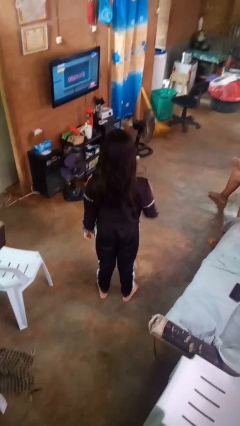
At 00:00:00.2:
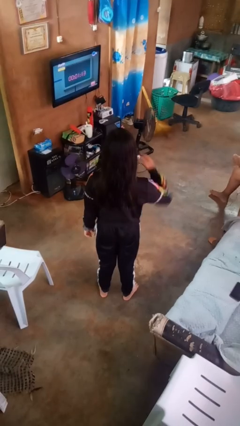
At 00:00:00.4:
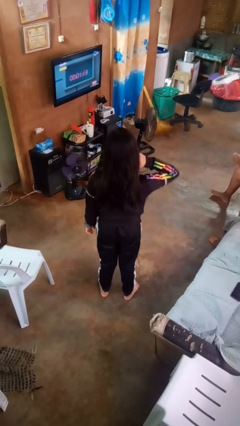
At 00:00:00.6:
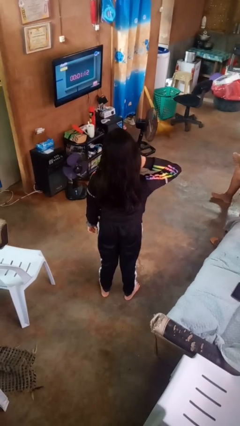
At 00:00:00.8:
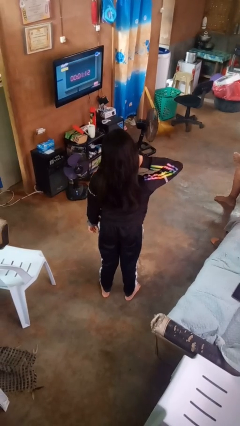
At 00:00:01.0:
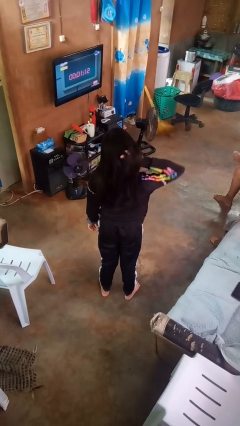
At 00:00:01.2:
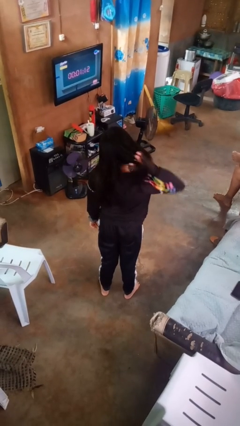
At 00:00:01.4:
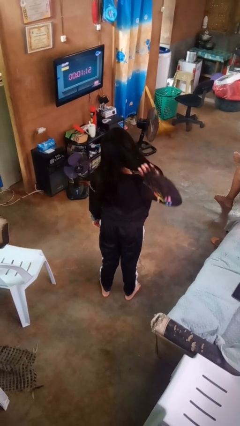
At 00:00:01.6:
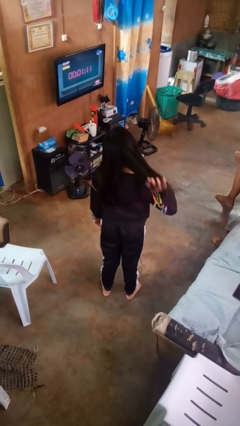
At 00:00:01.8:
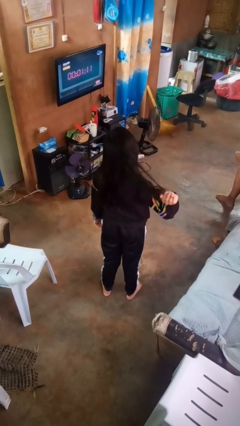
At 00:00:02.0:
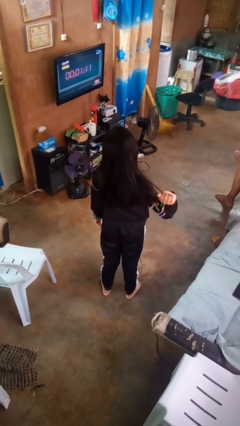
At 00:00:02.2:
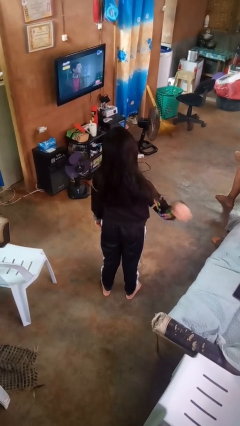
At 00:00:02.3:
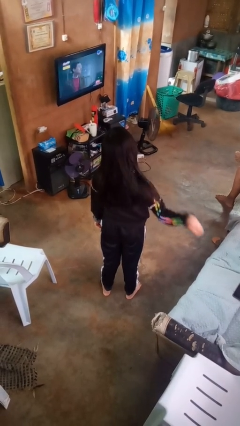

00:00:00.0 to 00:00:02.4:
person strokes hair

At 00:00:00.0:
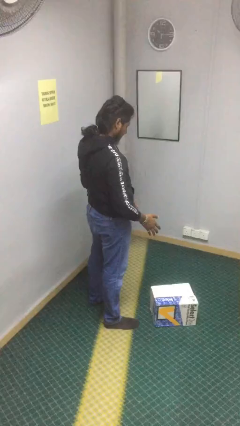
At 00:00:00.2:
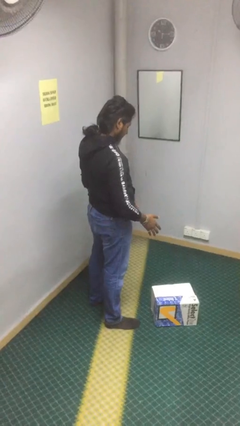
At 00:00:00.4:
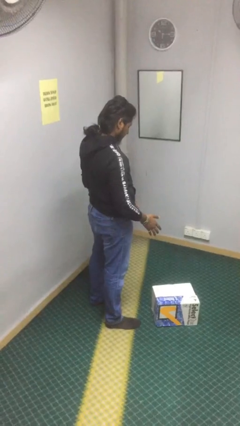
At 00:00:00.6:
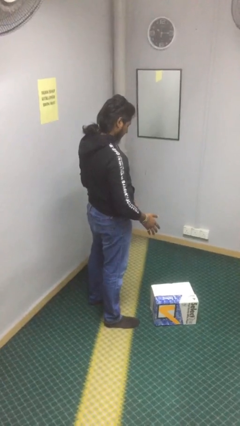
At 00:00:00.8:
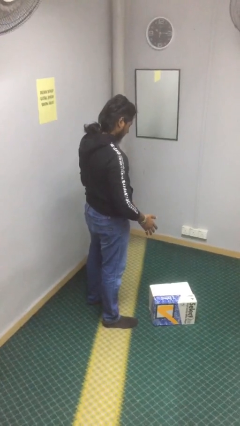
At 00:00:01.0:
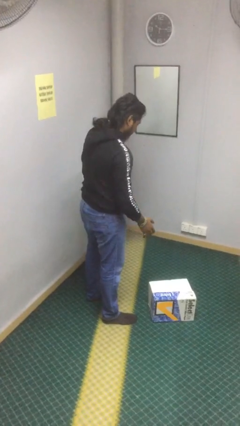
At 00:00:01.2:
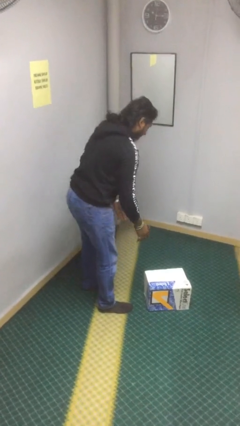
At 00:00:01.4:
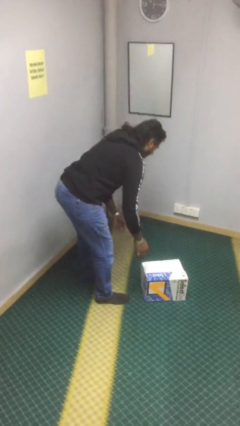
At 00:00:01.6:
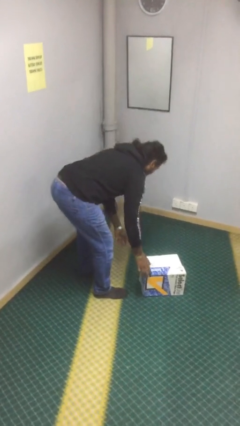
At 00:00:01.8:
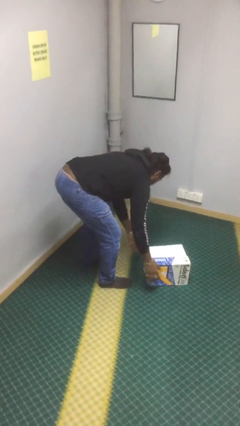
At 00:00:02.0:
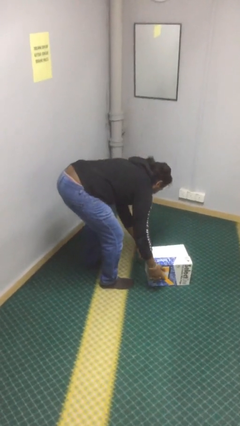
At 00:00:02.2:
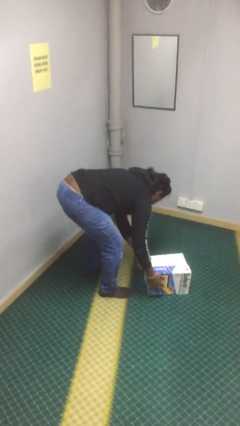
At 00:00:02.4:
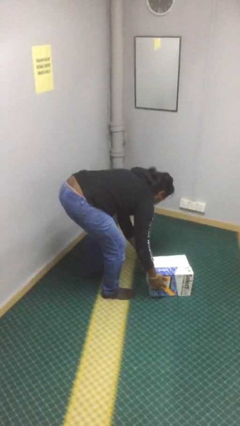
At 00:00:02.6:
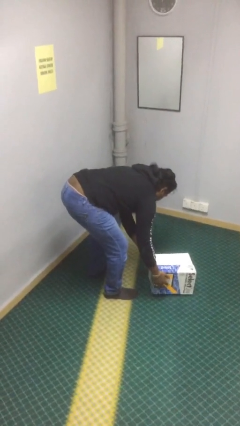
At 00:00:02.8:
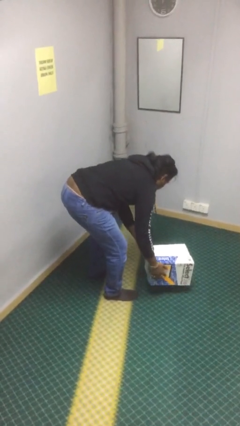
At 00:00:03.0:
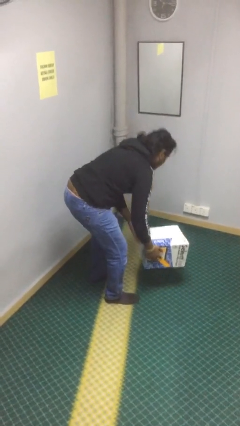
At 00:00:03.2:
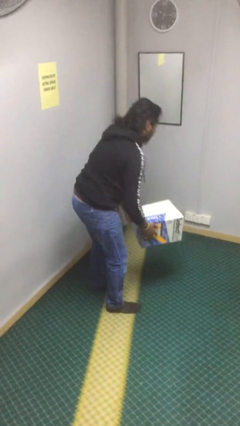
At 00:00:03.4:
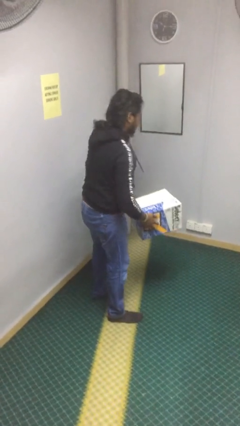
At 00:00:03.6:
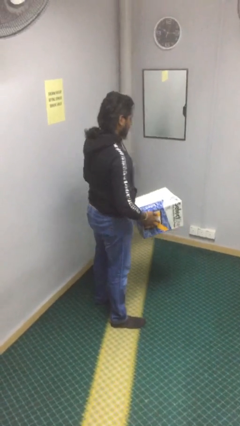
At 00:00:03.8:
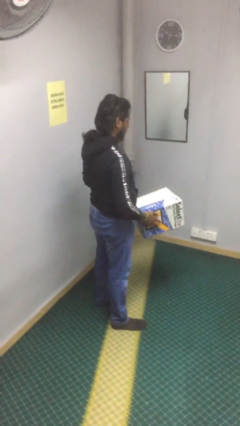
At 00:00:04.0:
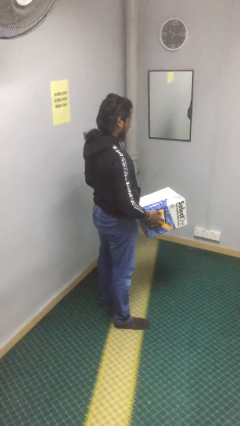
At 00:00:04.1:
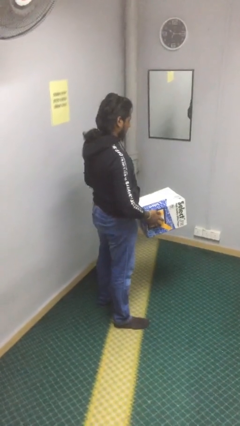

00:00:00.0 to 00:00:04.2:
person picks up object from floor

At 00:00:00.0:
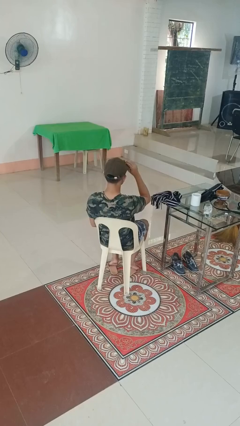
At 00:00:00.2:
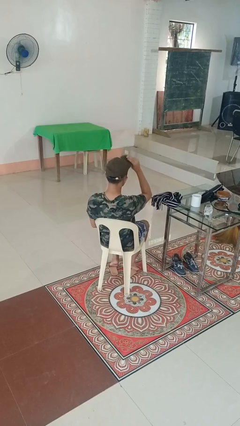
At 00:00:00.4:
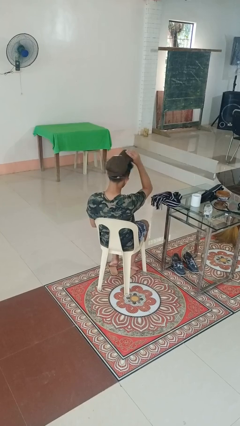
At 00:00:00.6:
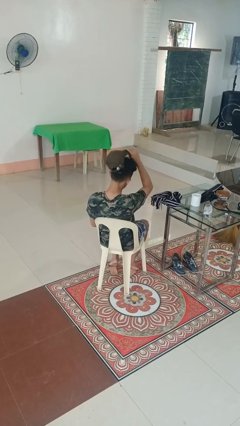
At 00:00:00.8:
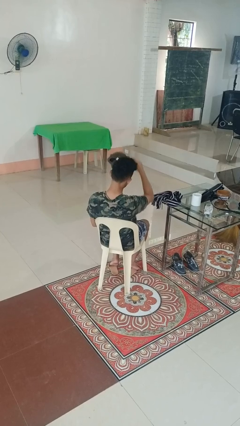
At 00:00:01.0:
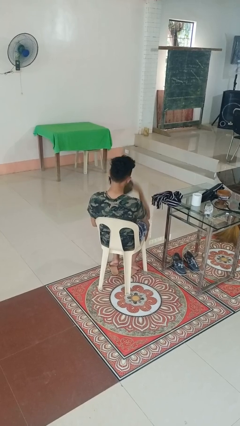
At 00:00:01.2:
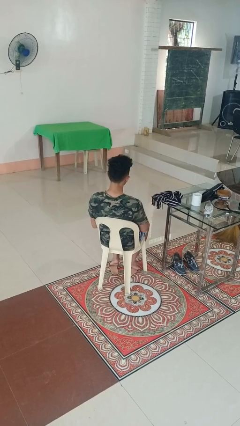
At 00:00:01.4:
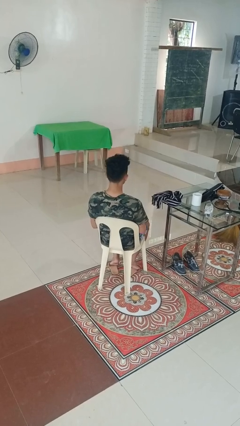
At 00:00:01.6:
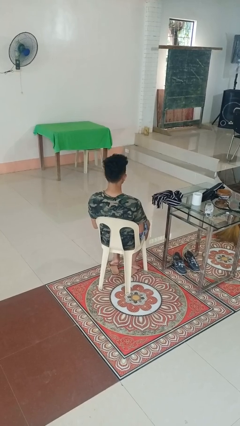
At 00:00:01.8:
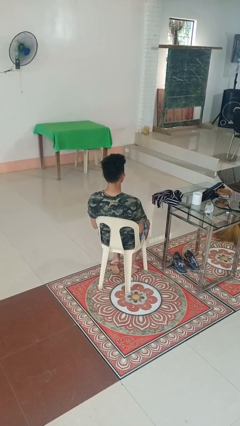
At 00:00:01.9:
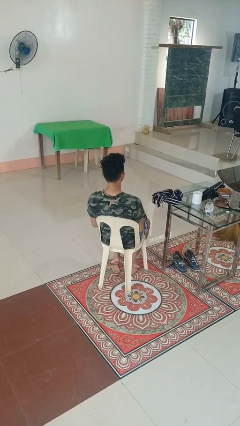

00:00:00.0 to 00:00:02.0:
person takes off hat

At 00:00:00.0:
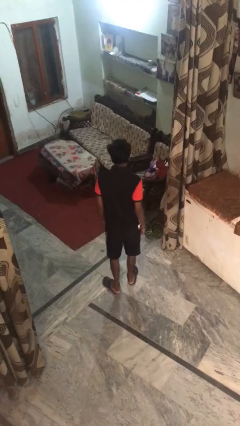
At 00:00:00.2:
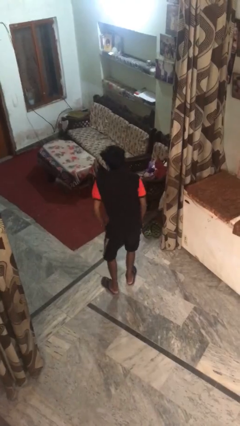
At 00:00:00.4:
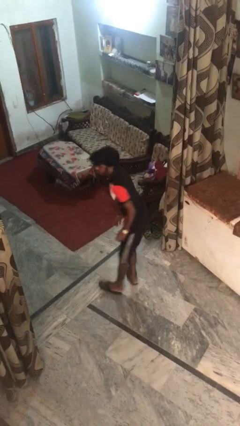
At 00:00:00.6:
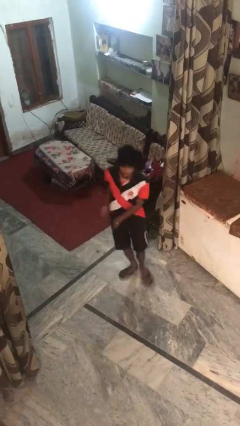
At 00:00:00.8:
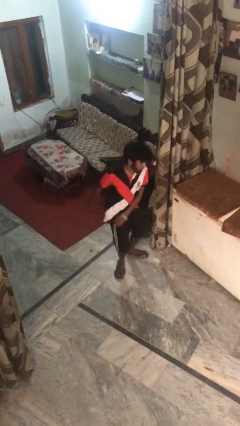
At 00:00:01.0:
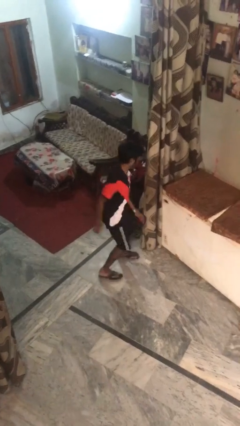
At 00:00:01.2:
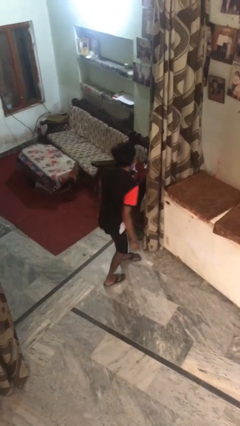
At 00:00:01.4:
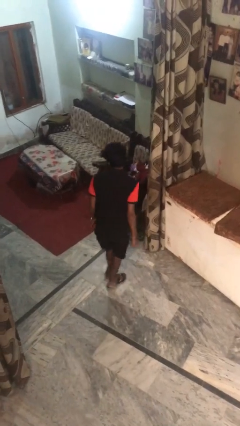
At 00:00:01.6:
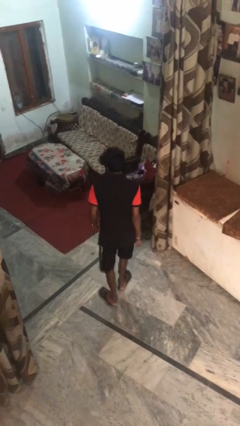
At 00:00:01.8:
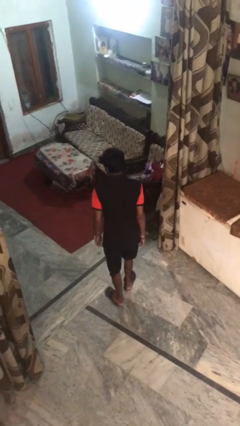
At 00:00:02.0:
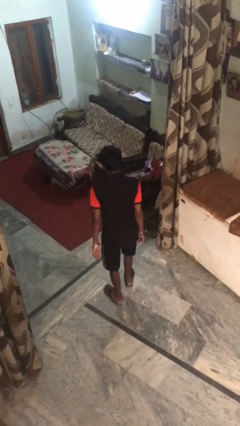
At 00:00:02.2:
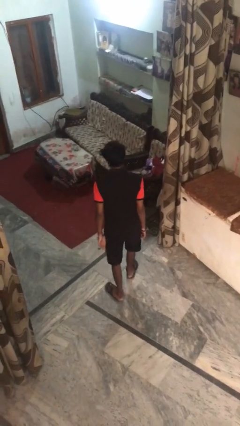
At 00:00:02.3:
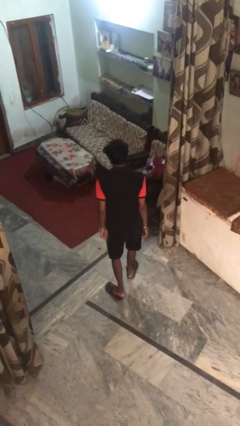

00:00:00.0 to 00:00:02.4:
person twirls

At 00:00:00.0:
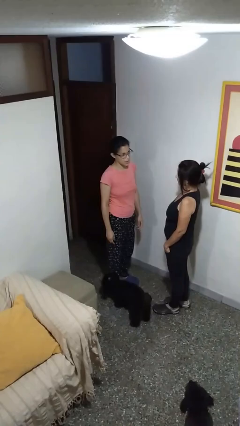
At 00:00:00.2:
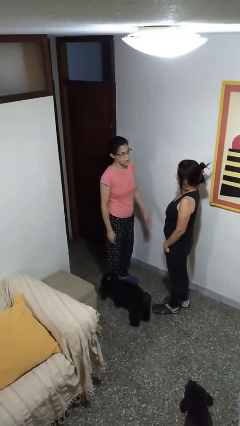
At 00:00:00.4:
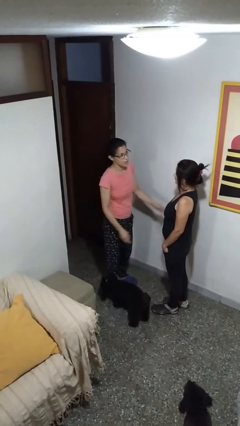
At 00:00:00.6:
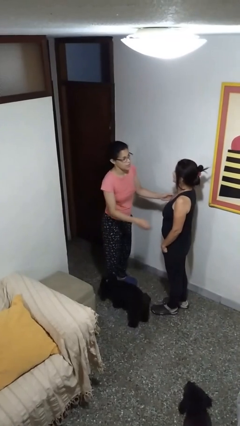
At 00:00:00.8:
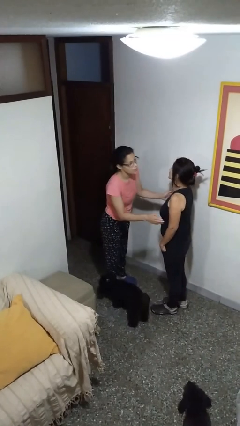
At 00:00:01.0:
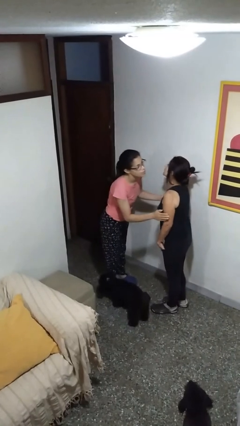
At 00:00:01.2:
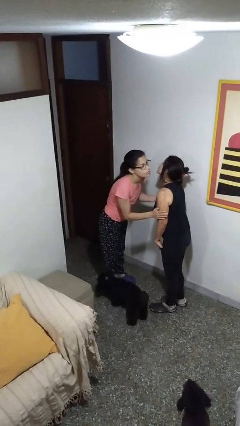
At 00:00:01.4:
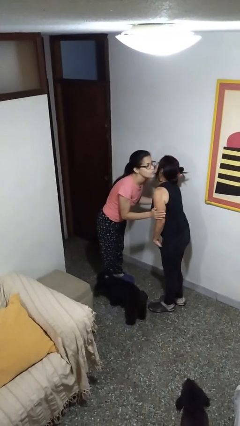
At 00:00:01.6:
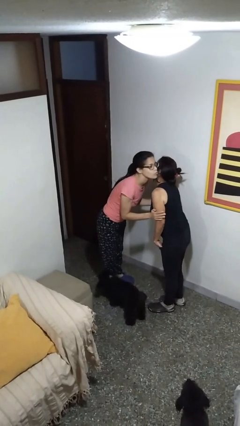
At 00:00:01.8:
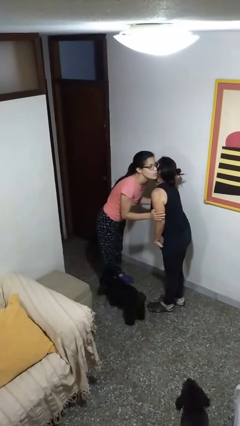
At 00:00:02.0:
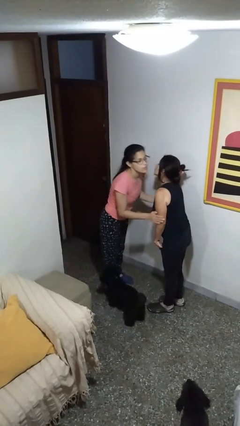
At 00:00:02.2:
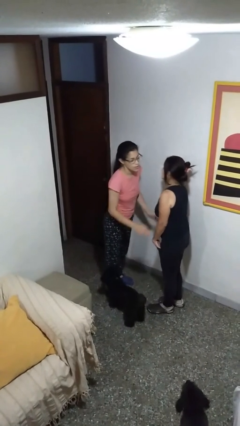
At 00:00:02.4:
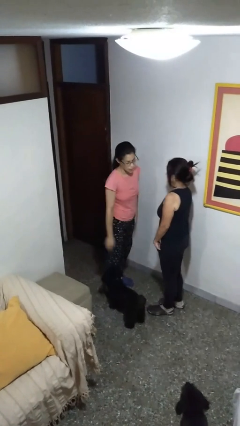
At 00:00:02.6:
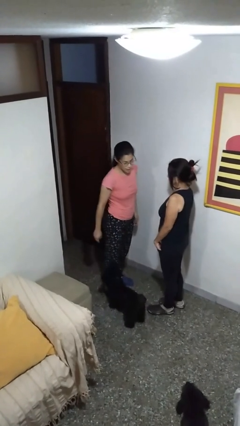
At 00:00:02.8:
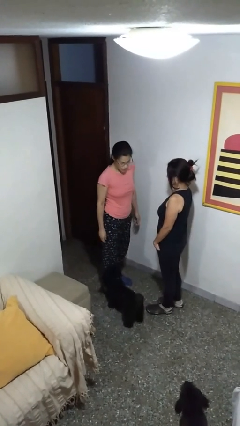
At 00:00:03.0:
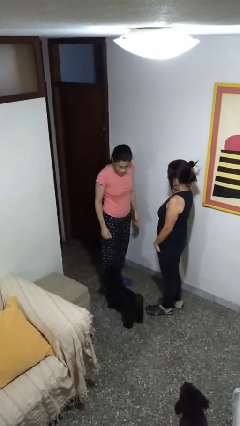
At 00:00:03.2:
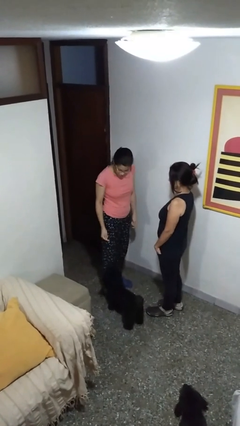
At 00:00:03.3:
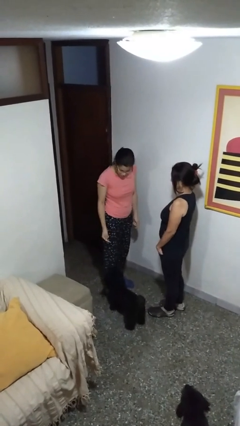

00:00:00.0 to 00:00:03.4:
person kisses cheek of person

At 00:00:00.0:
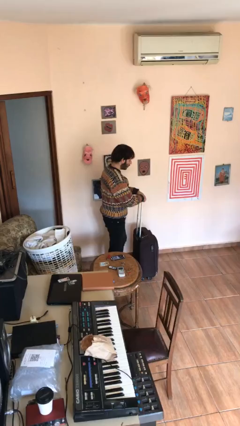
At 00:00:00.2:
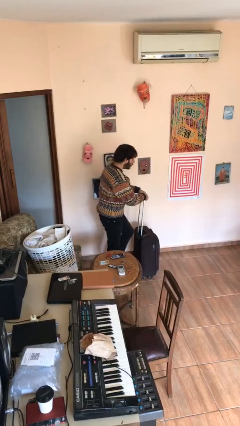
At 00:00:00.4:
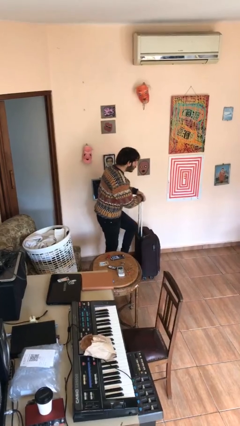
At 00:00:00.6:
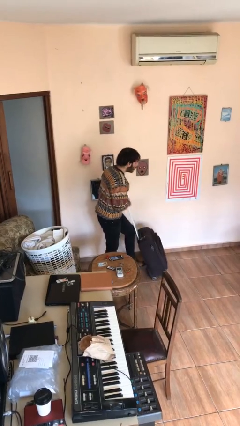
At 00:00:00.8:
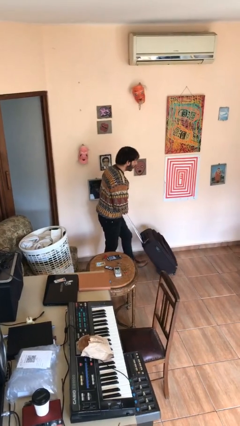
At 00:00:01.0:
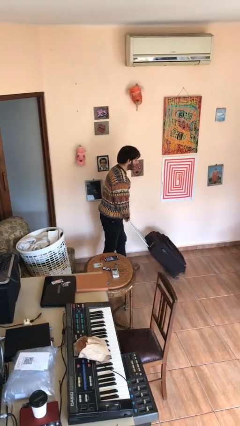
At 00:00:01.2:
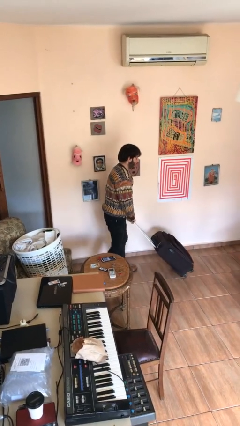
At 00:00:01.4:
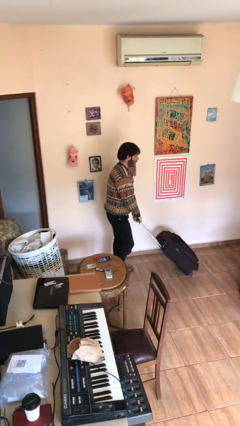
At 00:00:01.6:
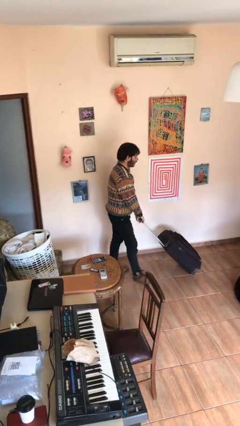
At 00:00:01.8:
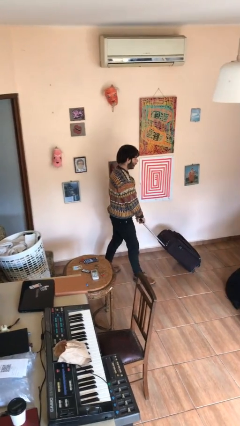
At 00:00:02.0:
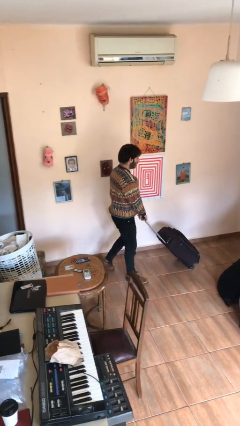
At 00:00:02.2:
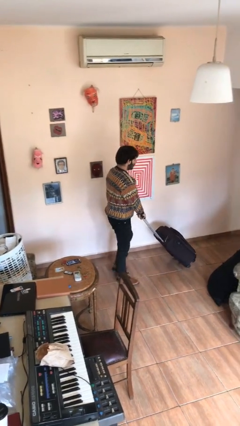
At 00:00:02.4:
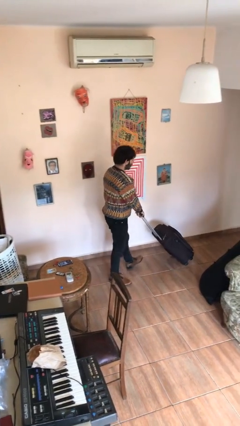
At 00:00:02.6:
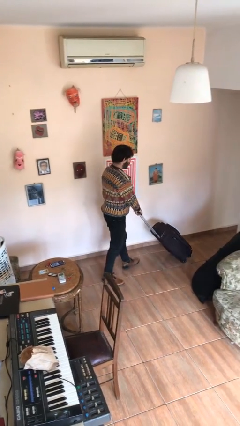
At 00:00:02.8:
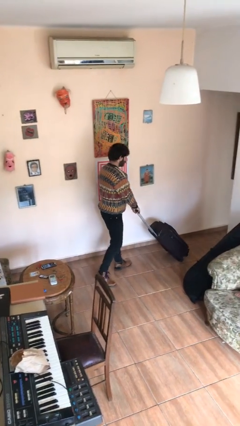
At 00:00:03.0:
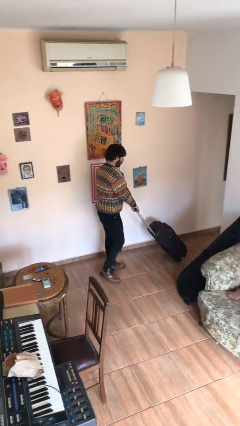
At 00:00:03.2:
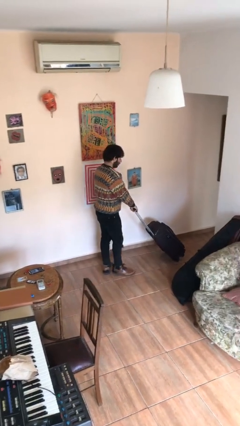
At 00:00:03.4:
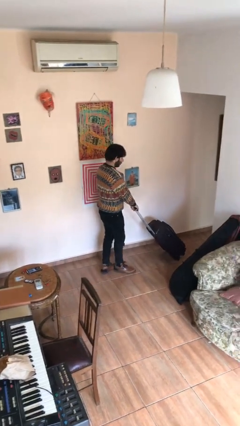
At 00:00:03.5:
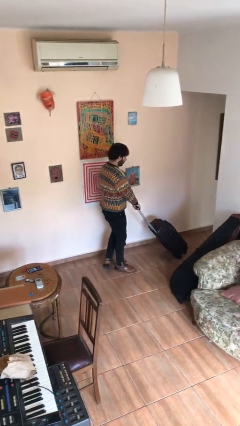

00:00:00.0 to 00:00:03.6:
person pushes wheeled cart
